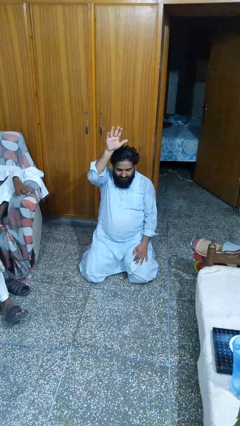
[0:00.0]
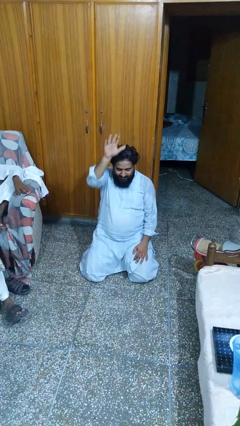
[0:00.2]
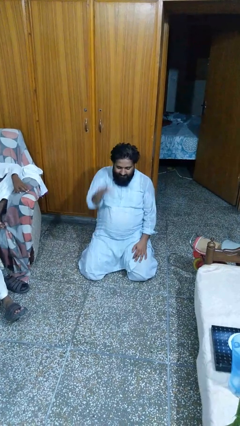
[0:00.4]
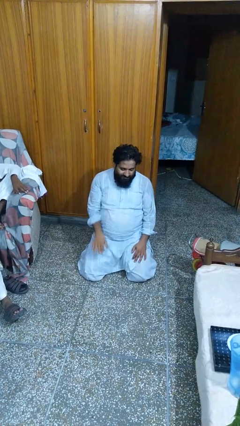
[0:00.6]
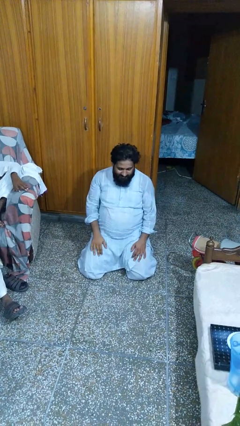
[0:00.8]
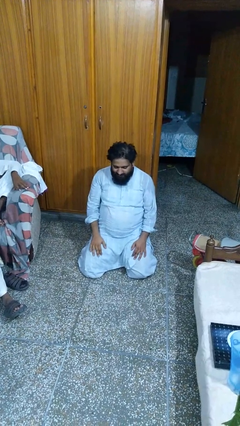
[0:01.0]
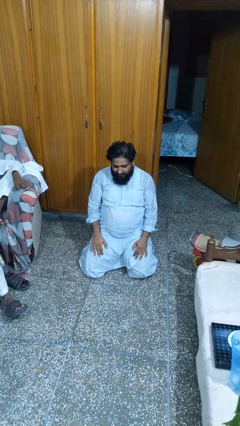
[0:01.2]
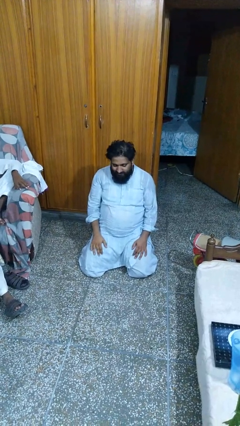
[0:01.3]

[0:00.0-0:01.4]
person gestures lower hand

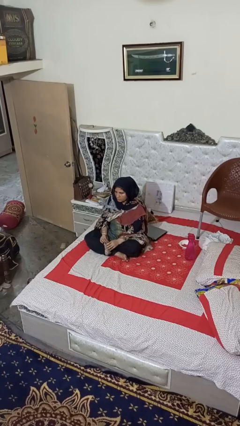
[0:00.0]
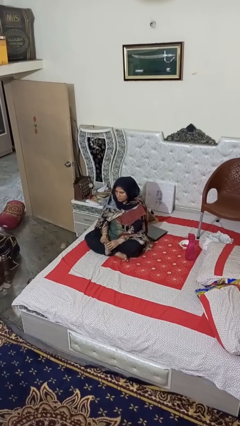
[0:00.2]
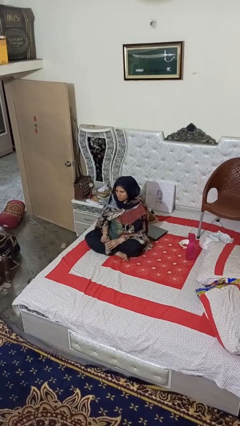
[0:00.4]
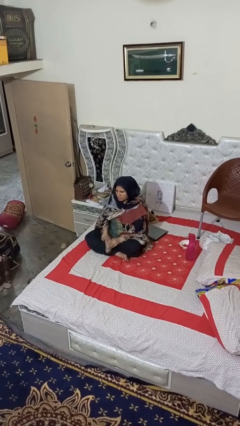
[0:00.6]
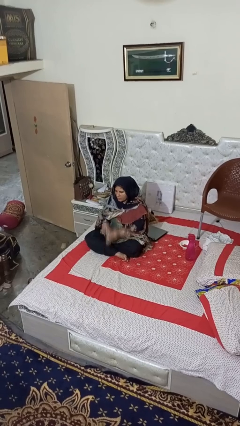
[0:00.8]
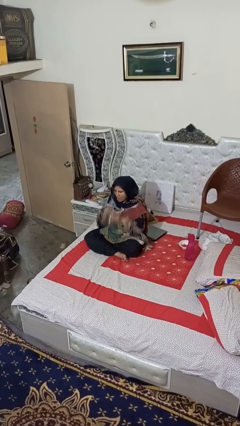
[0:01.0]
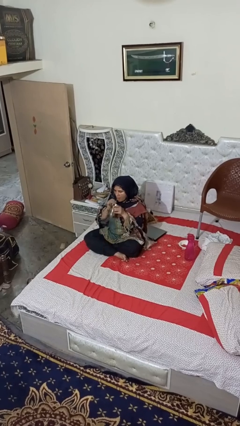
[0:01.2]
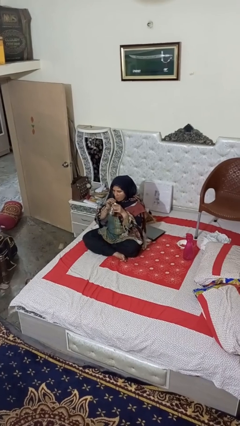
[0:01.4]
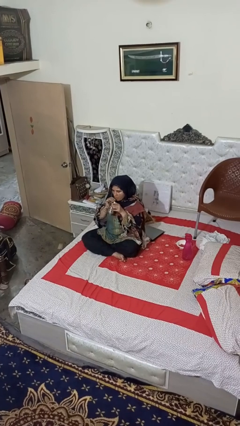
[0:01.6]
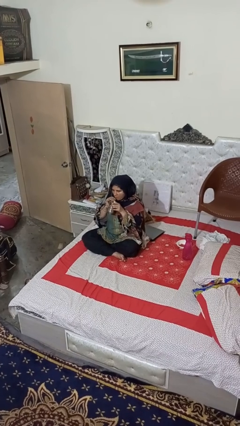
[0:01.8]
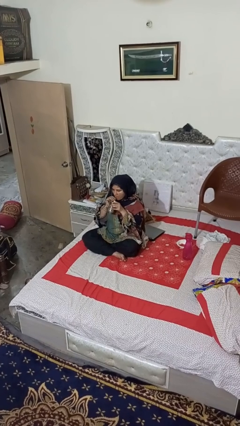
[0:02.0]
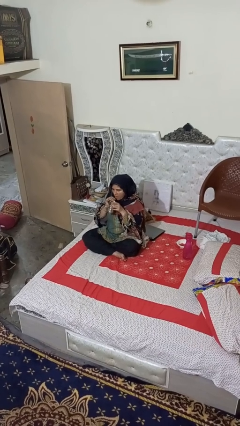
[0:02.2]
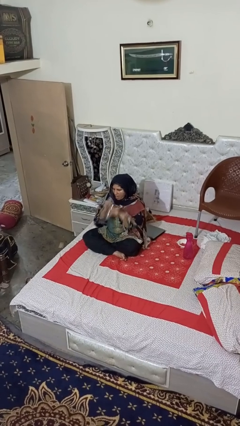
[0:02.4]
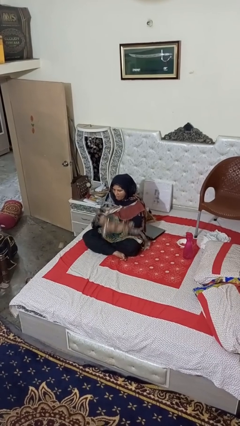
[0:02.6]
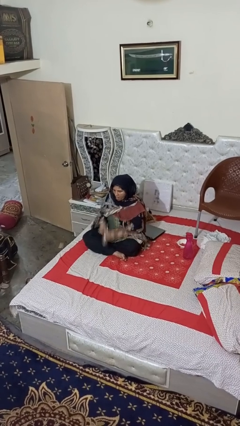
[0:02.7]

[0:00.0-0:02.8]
person drinks from straw

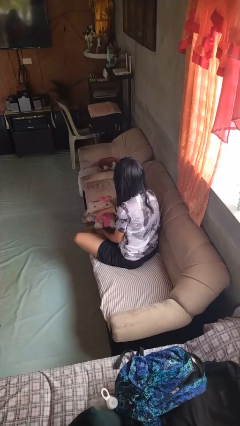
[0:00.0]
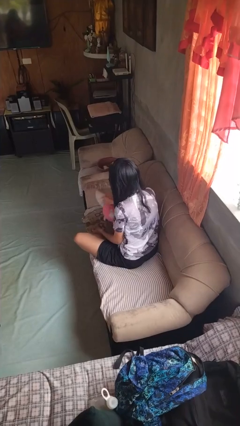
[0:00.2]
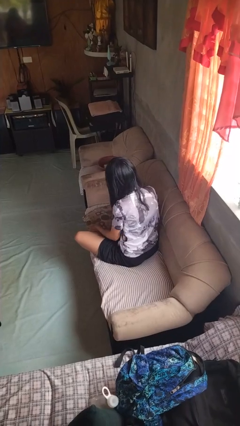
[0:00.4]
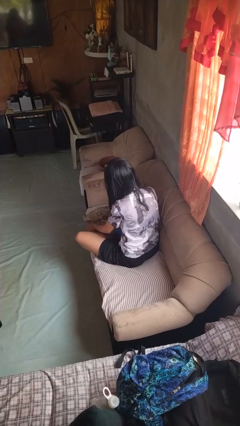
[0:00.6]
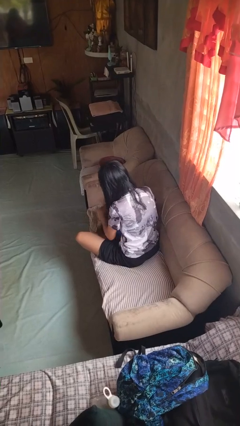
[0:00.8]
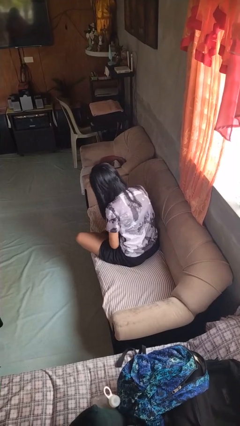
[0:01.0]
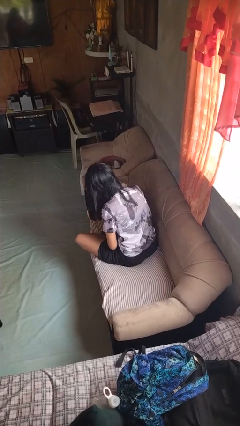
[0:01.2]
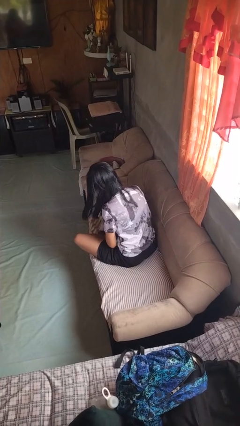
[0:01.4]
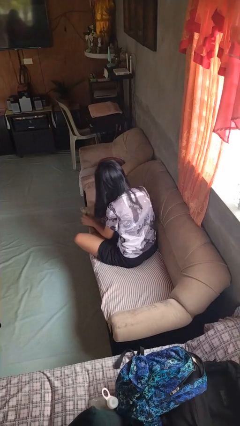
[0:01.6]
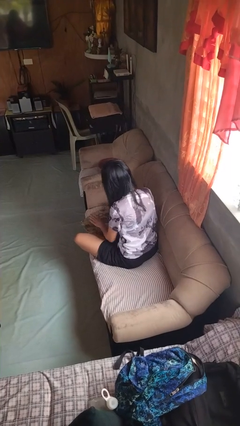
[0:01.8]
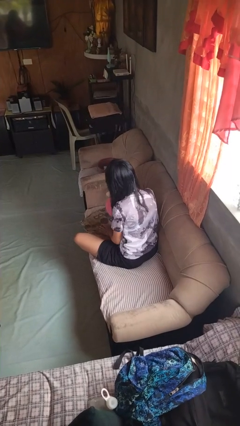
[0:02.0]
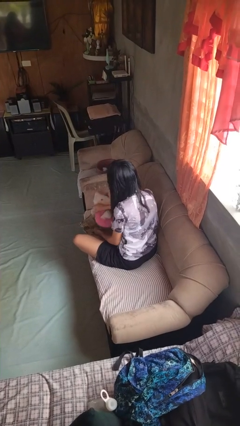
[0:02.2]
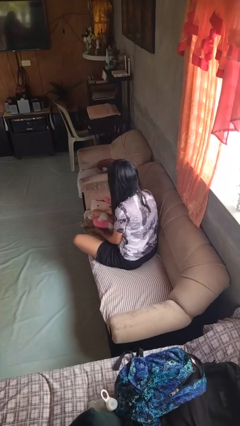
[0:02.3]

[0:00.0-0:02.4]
person searches in couch

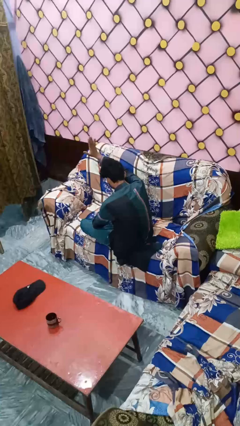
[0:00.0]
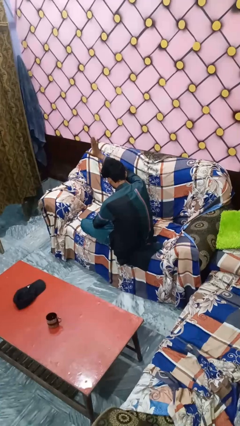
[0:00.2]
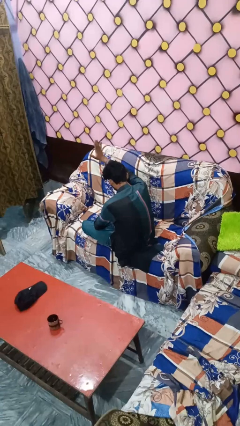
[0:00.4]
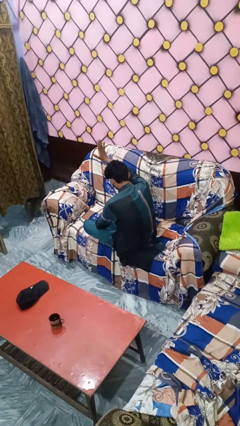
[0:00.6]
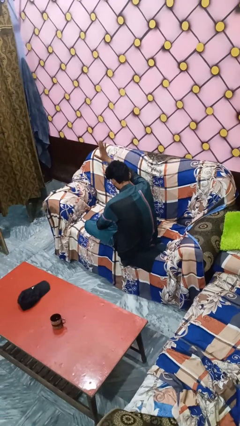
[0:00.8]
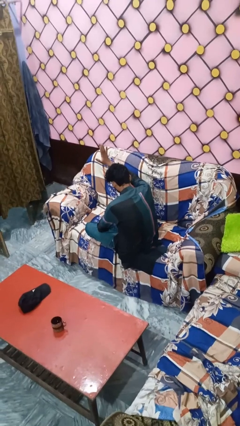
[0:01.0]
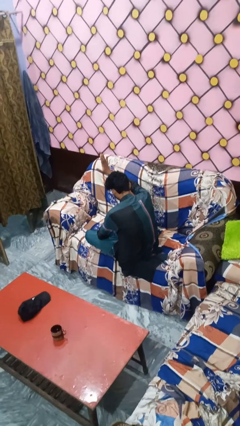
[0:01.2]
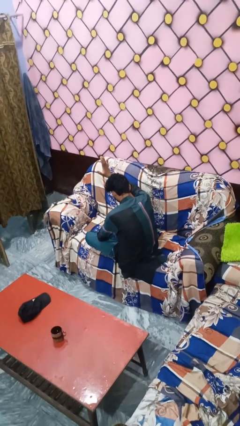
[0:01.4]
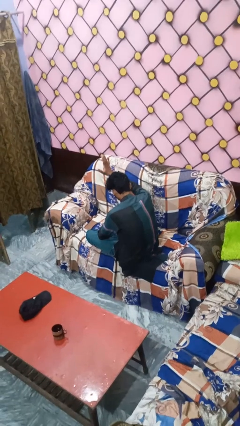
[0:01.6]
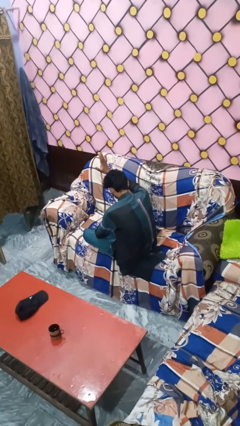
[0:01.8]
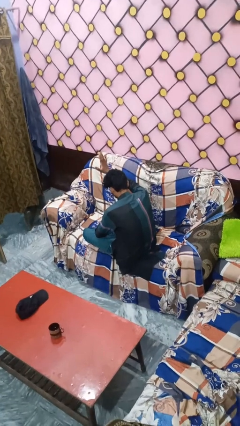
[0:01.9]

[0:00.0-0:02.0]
person gestures stop

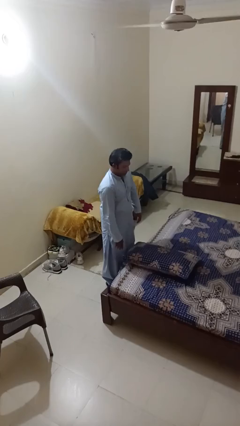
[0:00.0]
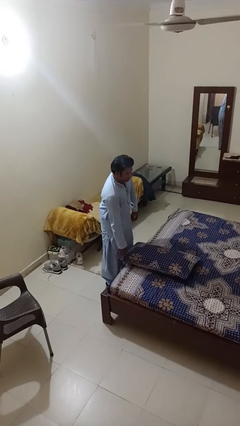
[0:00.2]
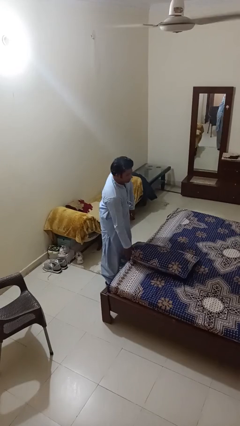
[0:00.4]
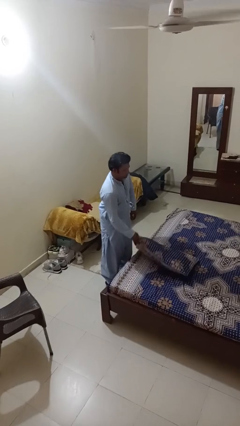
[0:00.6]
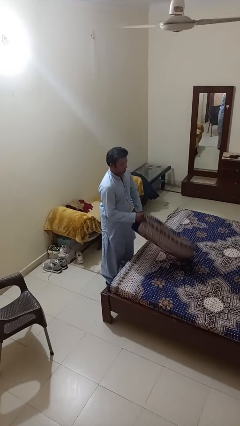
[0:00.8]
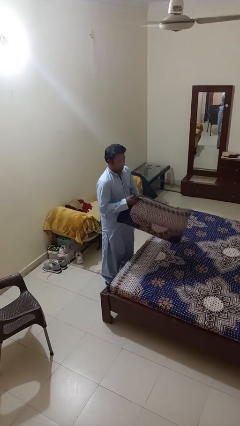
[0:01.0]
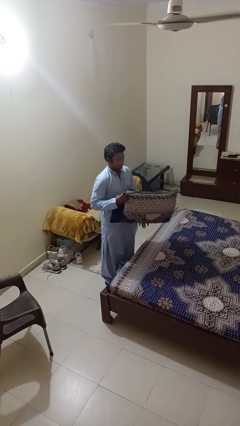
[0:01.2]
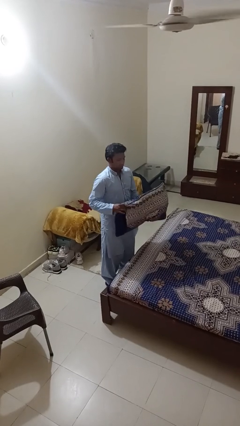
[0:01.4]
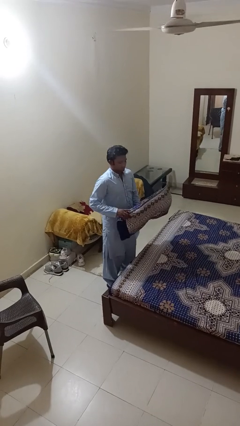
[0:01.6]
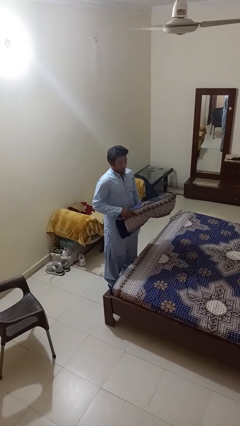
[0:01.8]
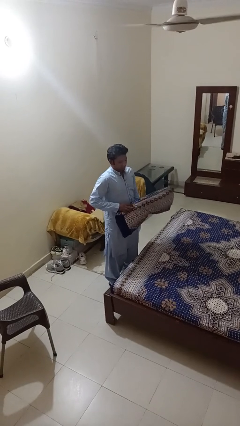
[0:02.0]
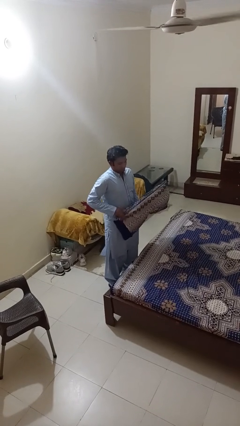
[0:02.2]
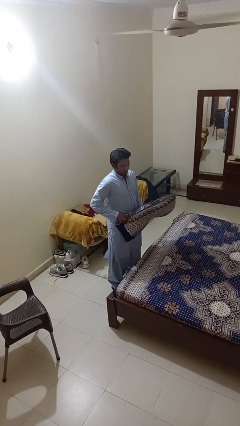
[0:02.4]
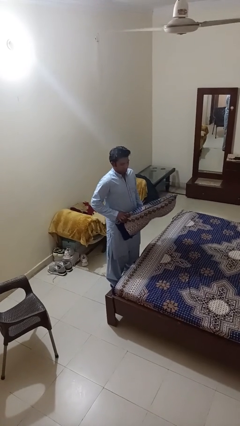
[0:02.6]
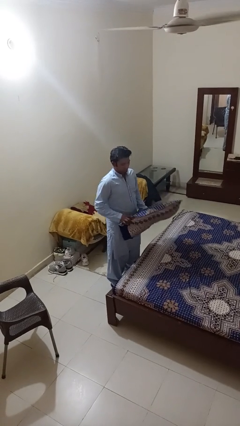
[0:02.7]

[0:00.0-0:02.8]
person picks up object from bed

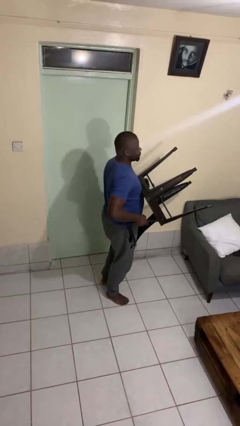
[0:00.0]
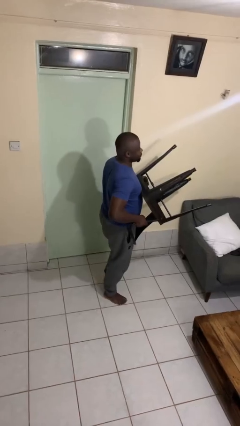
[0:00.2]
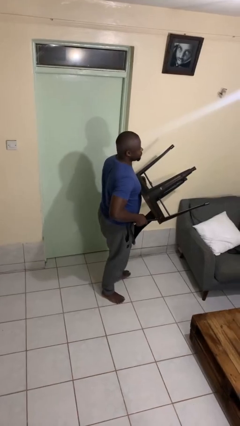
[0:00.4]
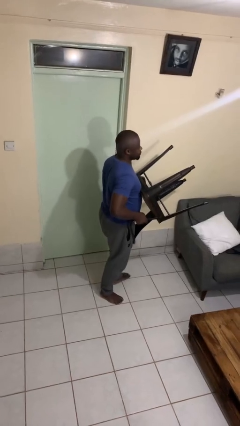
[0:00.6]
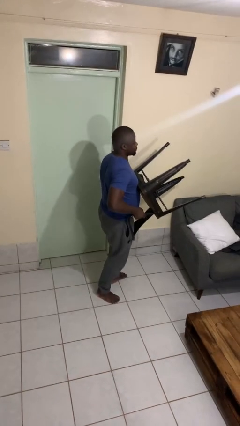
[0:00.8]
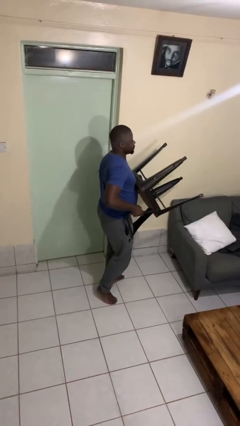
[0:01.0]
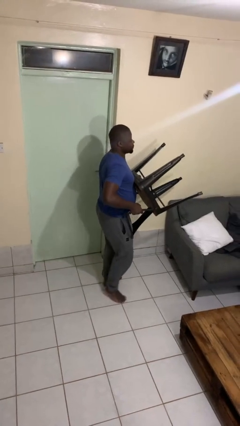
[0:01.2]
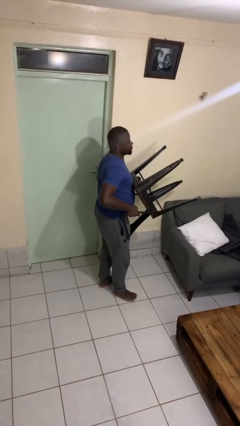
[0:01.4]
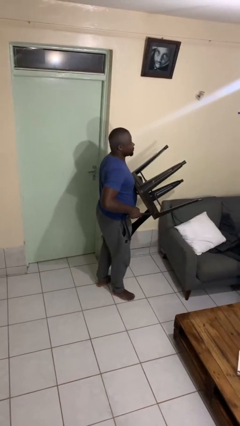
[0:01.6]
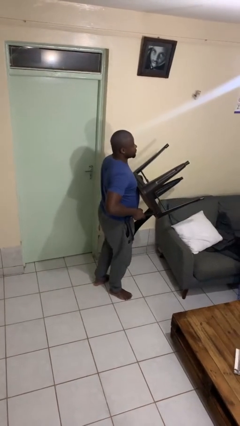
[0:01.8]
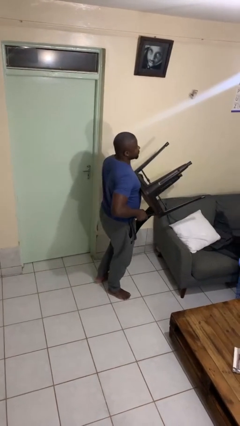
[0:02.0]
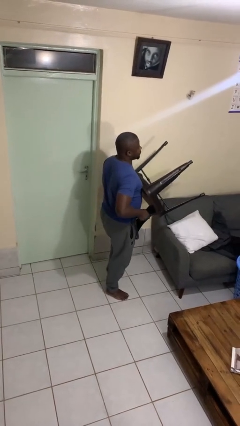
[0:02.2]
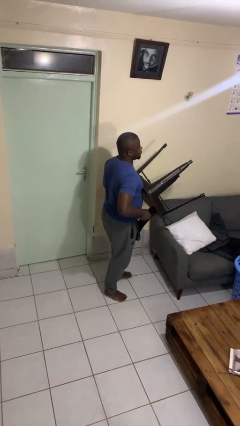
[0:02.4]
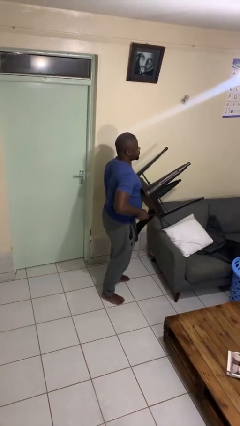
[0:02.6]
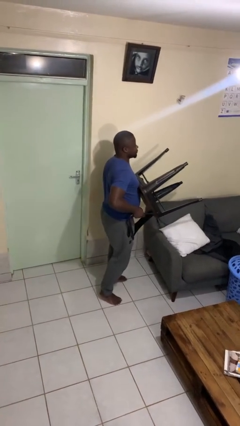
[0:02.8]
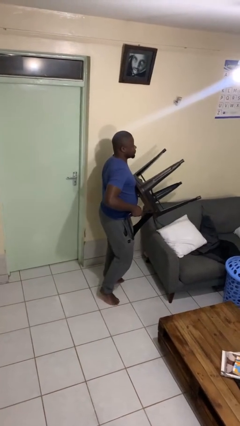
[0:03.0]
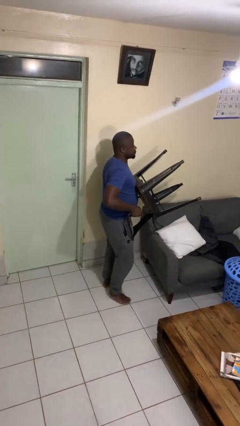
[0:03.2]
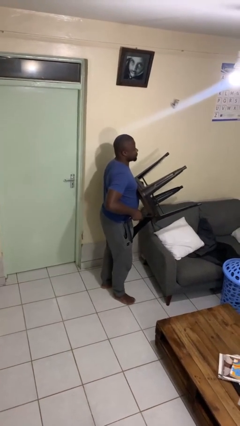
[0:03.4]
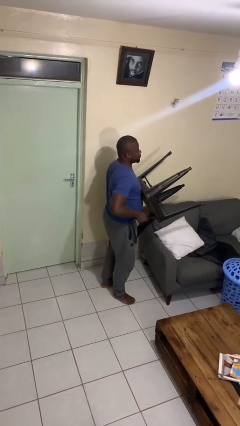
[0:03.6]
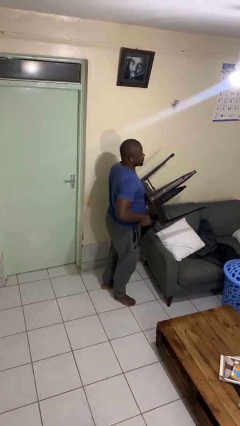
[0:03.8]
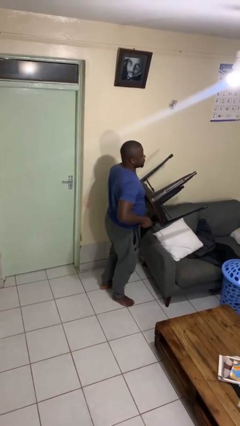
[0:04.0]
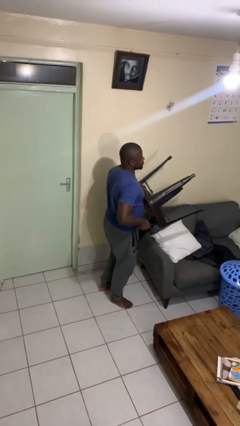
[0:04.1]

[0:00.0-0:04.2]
person carries furniture

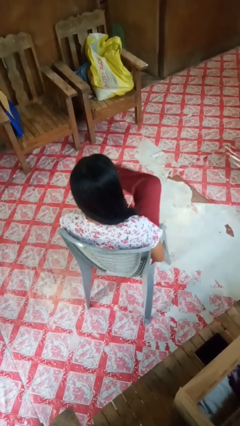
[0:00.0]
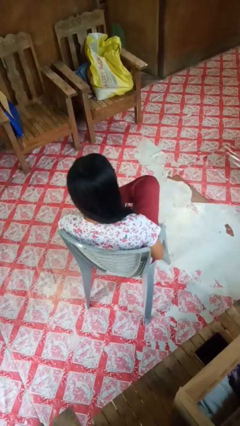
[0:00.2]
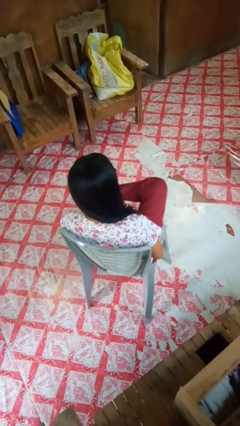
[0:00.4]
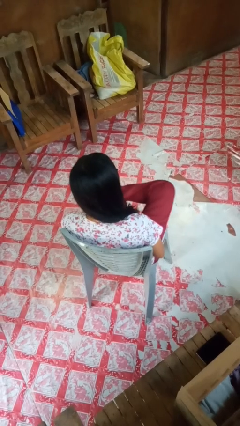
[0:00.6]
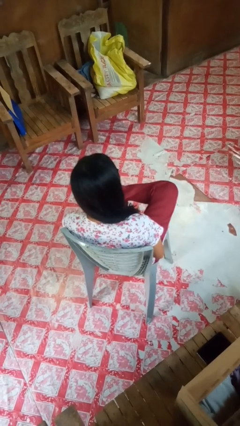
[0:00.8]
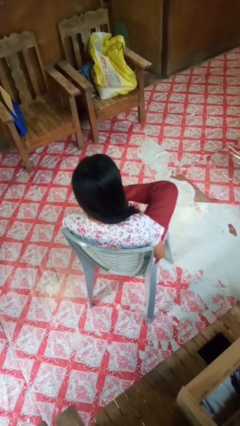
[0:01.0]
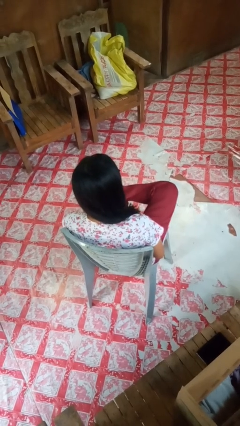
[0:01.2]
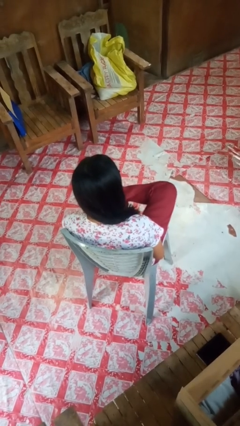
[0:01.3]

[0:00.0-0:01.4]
person crosses legs
